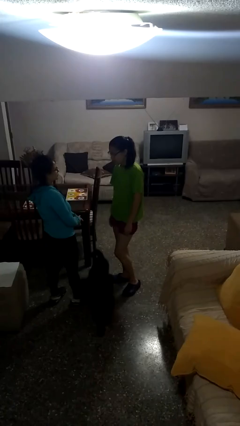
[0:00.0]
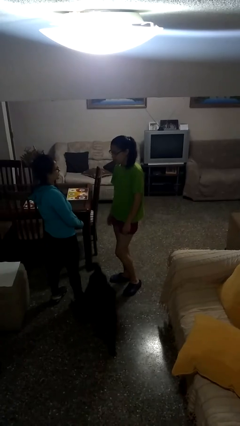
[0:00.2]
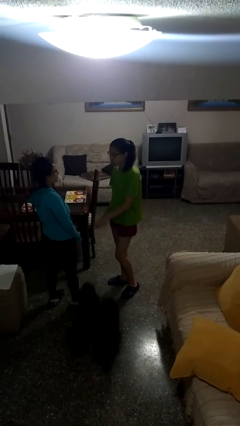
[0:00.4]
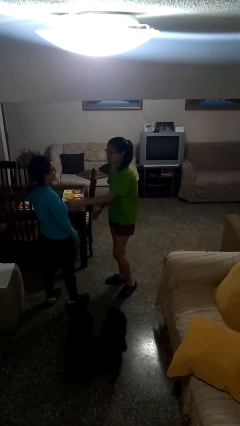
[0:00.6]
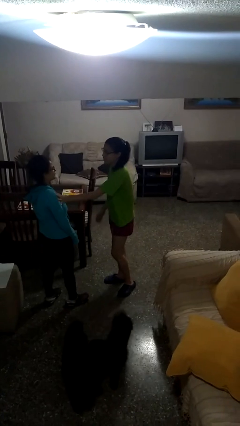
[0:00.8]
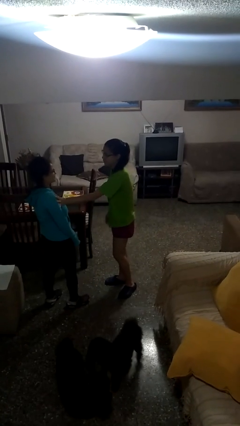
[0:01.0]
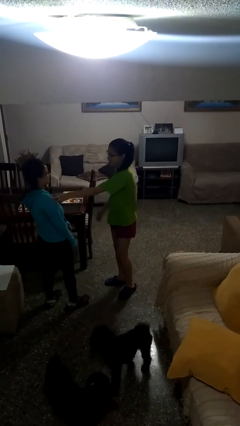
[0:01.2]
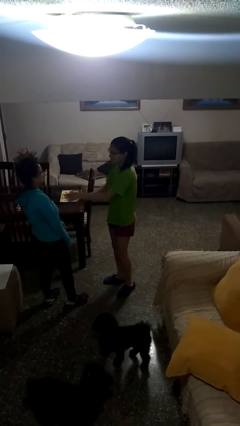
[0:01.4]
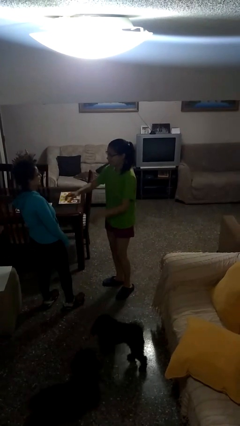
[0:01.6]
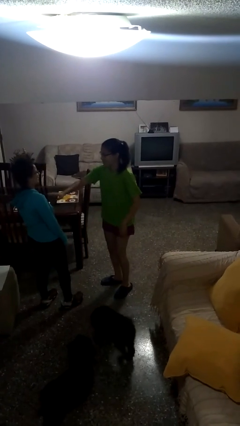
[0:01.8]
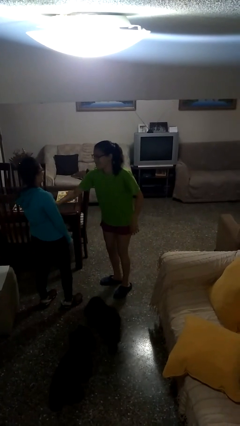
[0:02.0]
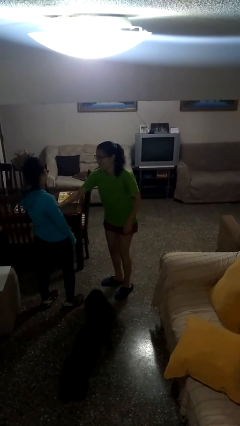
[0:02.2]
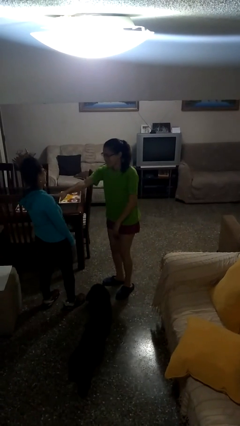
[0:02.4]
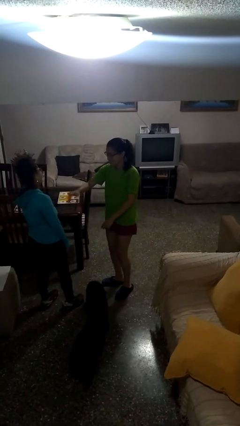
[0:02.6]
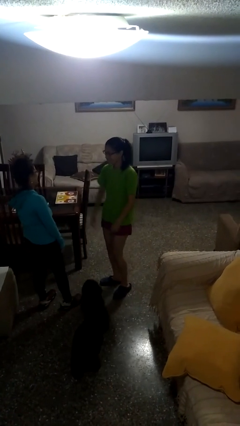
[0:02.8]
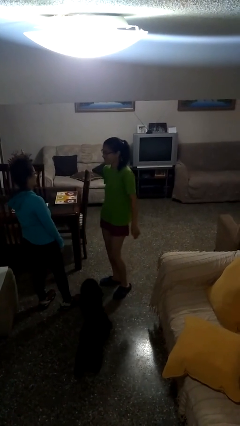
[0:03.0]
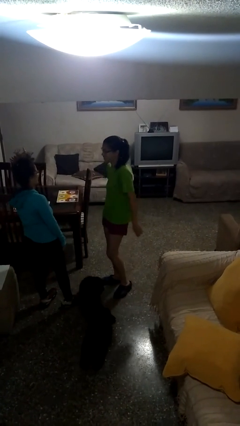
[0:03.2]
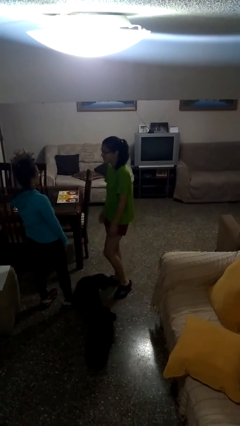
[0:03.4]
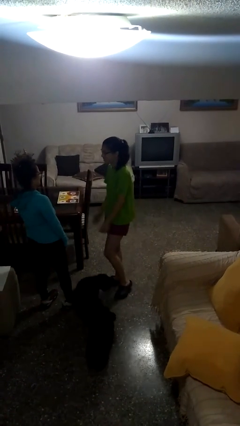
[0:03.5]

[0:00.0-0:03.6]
person shoves person

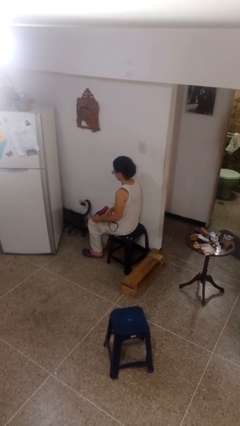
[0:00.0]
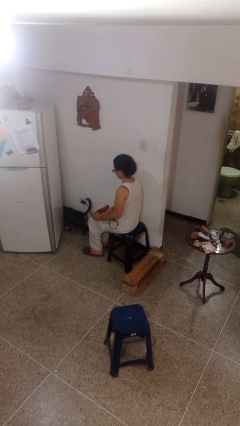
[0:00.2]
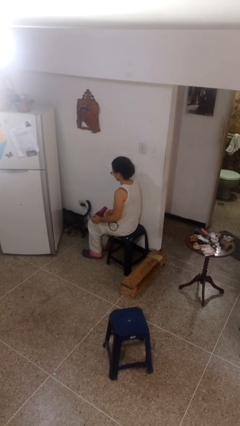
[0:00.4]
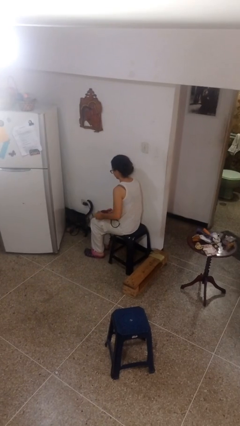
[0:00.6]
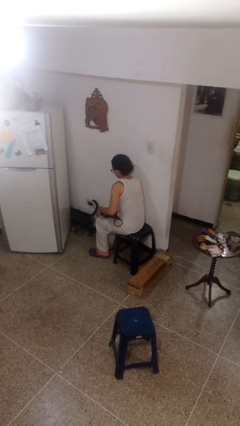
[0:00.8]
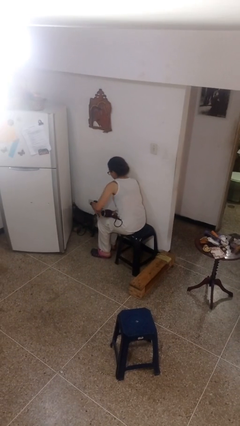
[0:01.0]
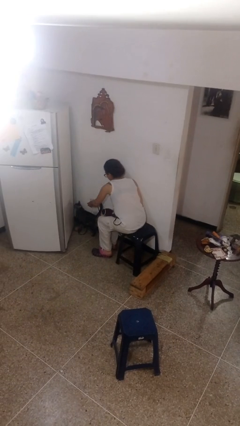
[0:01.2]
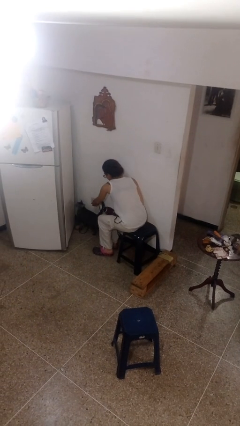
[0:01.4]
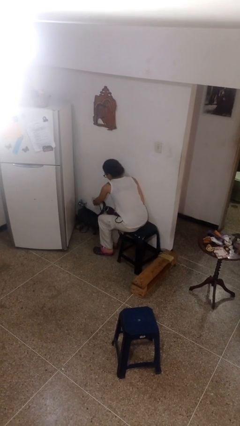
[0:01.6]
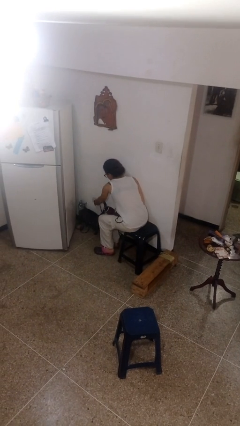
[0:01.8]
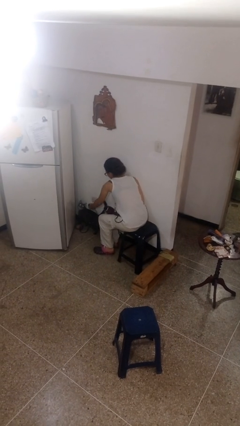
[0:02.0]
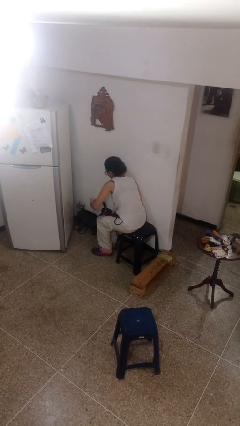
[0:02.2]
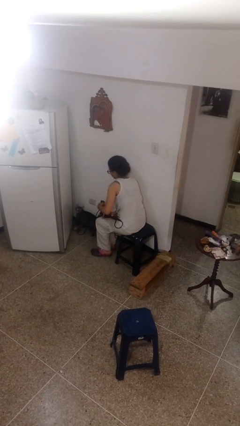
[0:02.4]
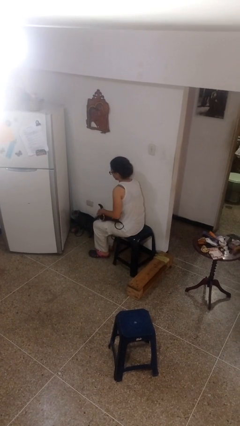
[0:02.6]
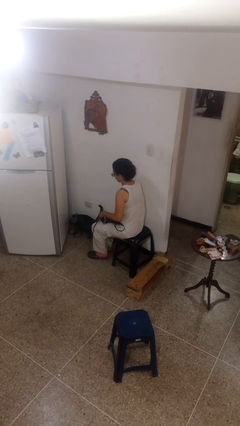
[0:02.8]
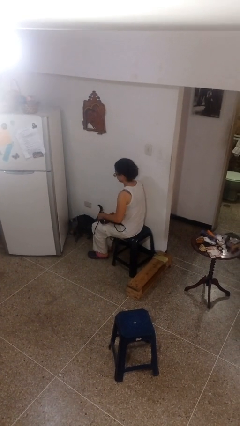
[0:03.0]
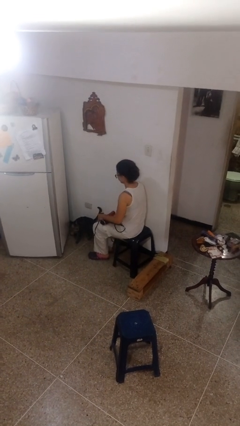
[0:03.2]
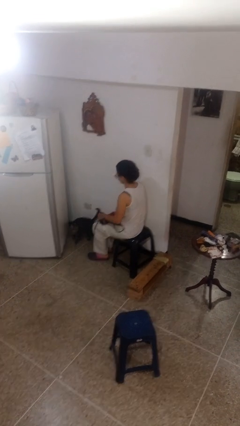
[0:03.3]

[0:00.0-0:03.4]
person unplugs from electrical socket

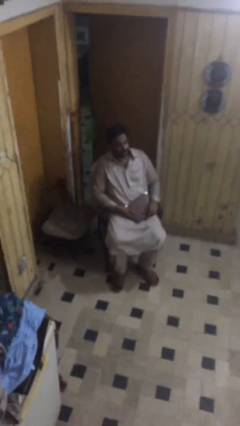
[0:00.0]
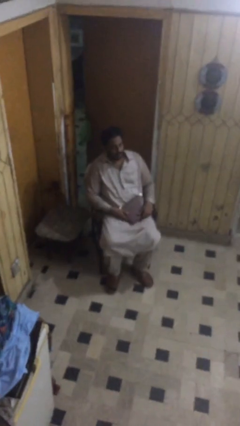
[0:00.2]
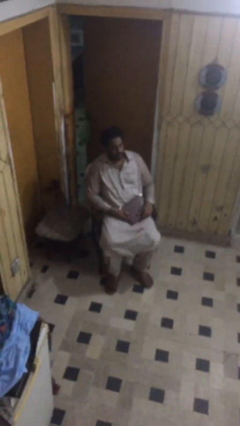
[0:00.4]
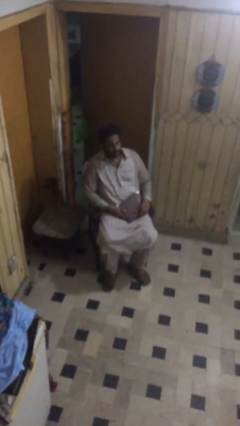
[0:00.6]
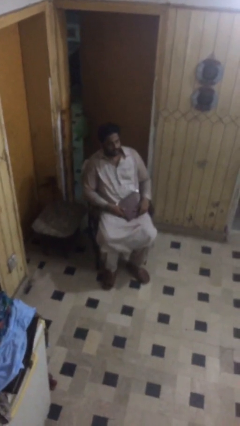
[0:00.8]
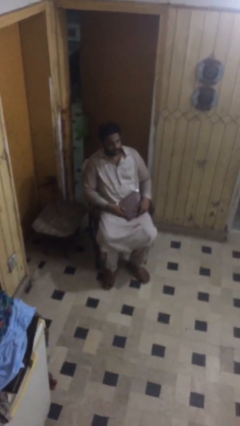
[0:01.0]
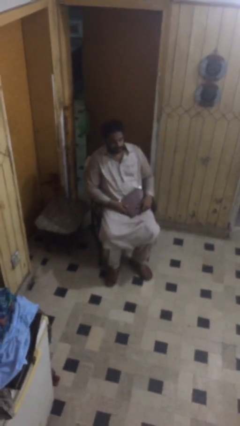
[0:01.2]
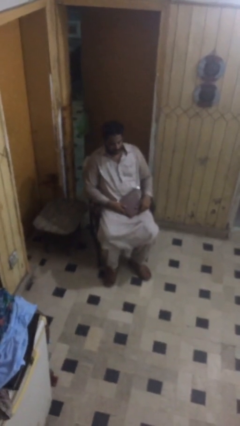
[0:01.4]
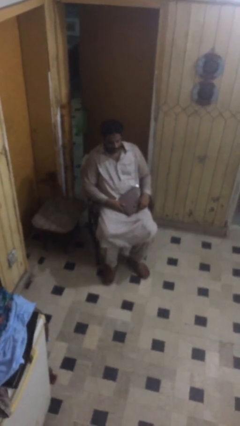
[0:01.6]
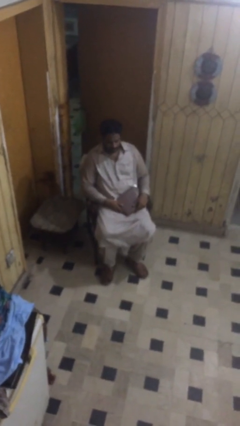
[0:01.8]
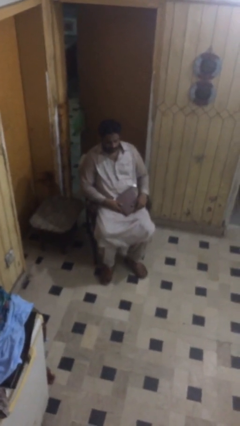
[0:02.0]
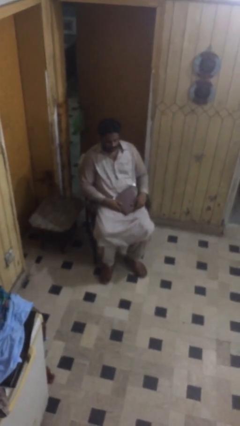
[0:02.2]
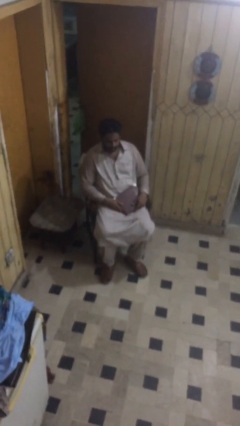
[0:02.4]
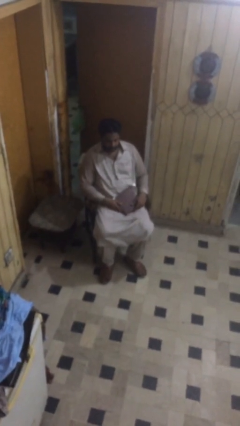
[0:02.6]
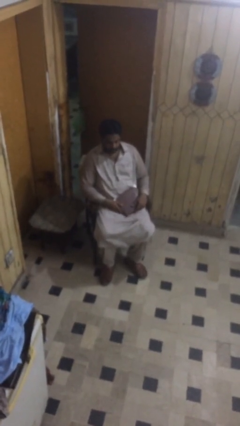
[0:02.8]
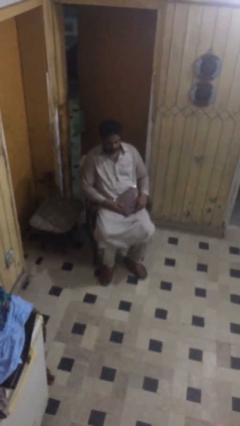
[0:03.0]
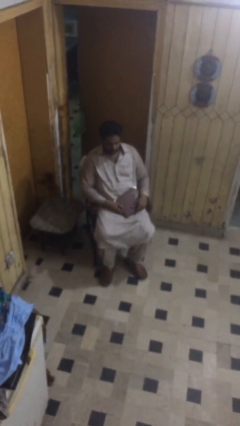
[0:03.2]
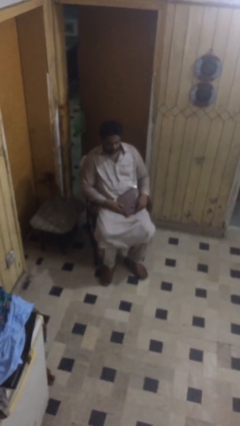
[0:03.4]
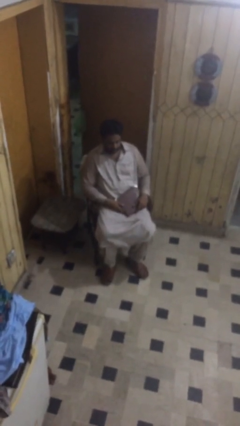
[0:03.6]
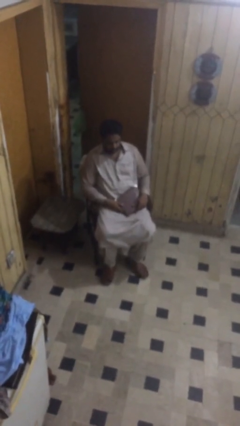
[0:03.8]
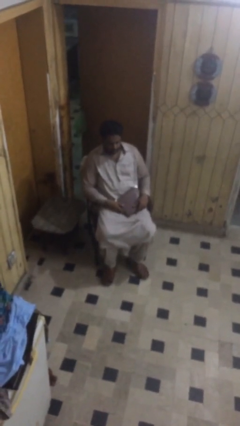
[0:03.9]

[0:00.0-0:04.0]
person sits down

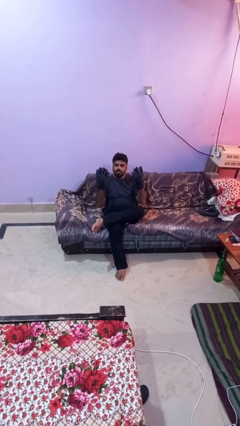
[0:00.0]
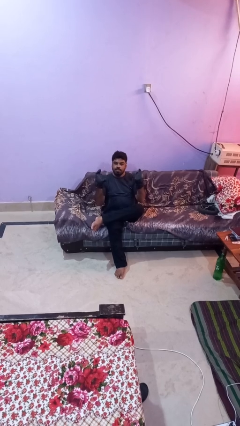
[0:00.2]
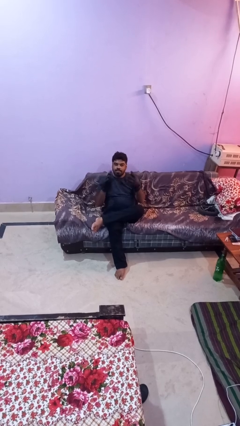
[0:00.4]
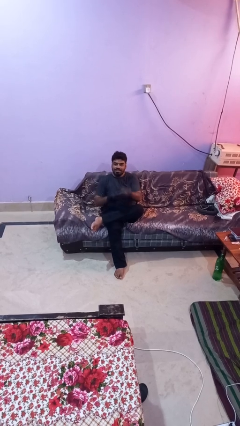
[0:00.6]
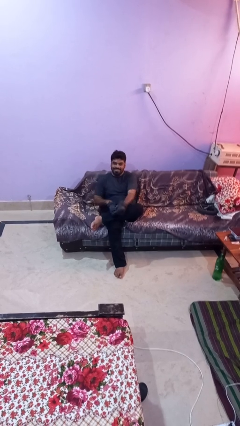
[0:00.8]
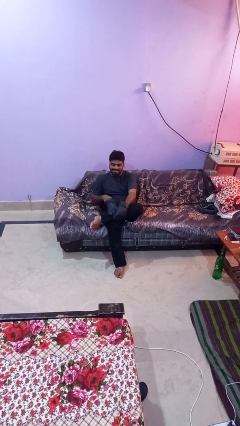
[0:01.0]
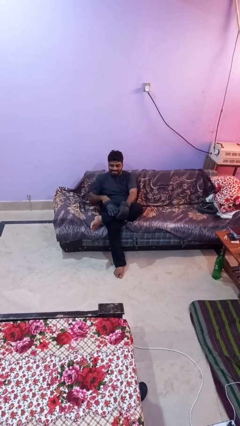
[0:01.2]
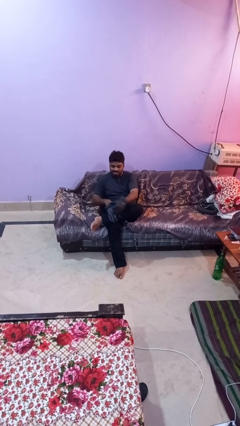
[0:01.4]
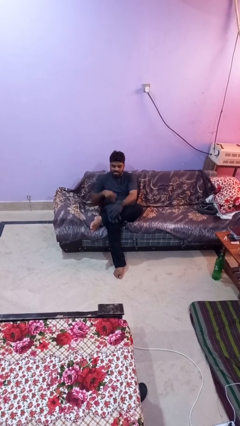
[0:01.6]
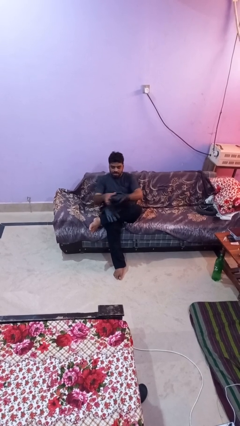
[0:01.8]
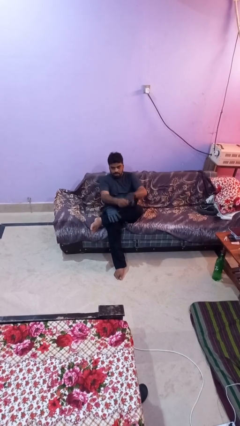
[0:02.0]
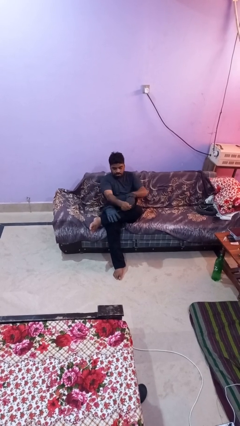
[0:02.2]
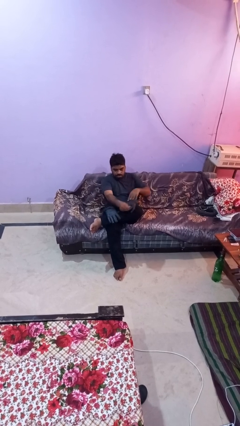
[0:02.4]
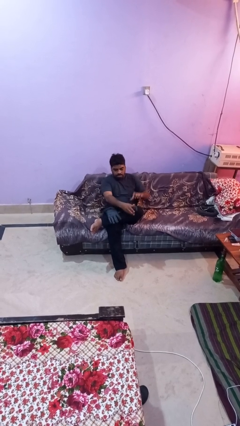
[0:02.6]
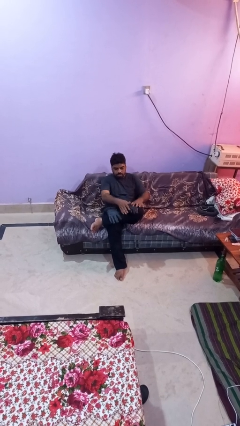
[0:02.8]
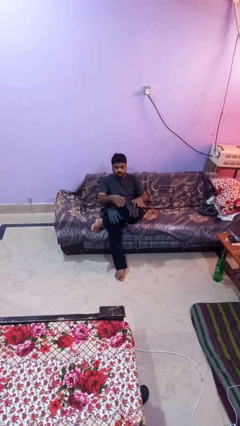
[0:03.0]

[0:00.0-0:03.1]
person takes off gloves

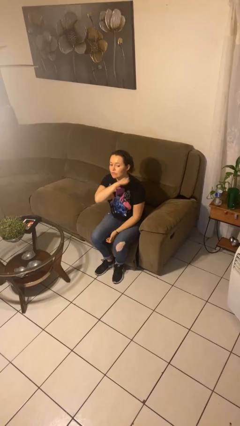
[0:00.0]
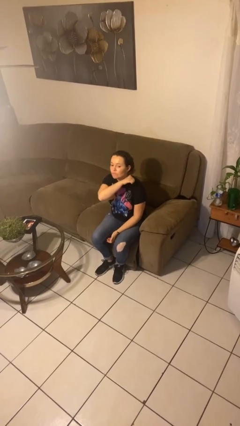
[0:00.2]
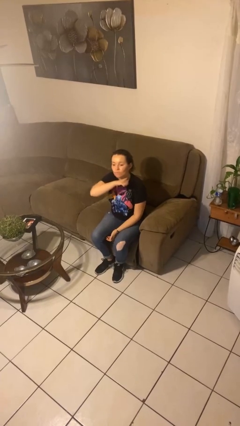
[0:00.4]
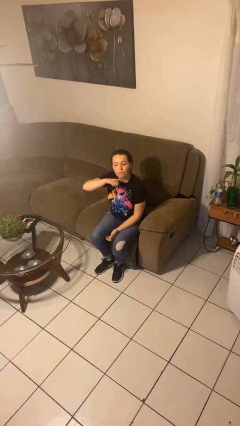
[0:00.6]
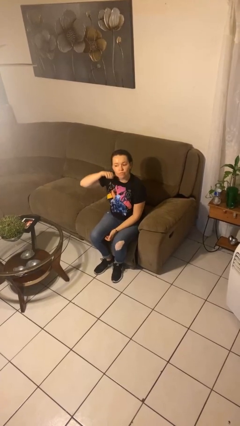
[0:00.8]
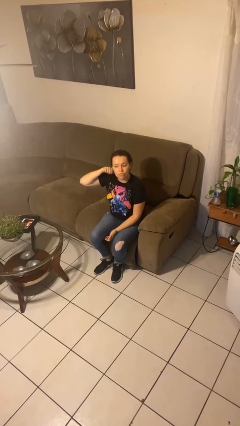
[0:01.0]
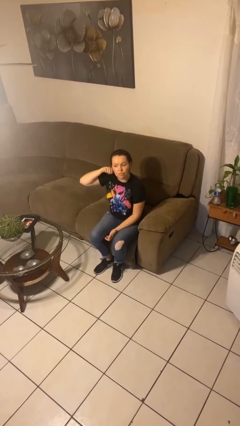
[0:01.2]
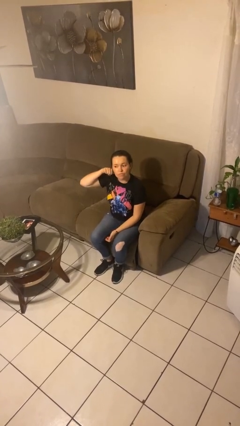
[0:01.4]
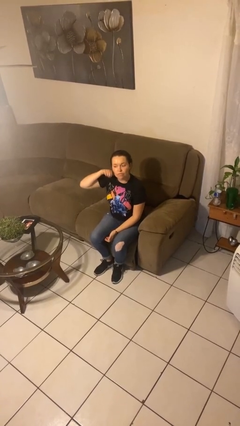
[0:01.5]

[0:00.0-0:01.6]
person gestures cut

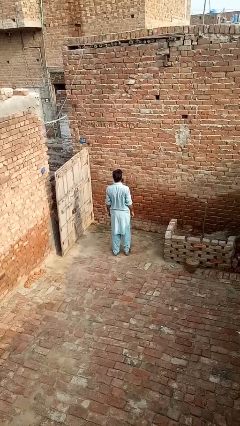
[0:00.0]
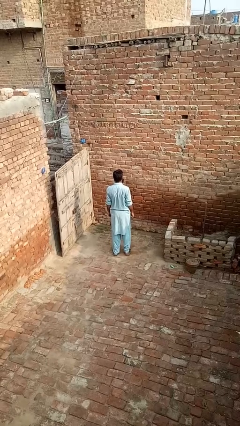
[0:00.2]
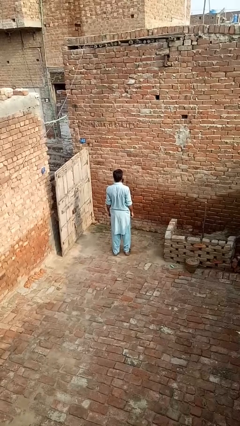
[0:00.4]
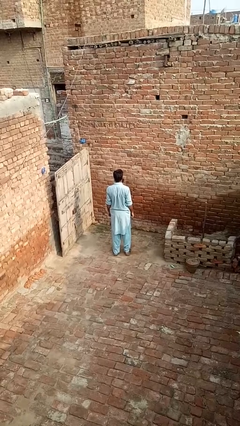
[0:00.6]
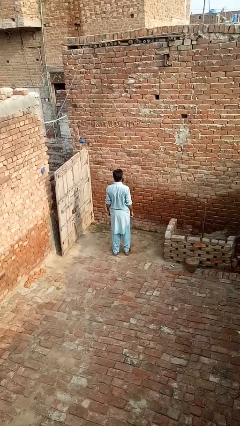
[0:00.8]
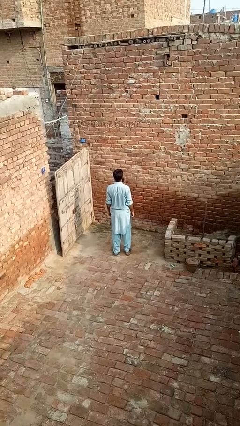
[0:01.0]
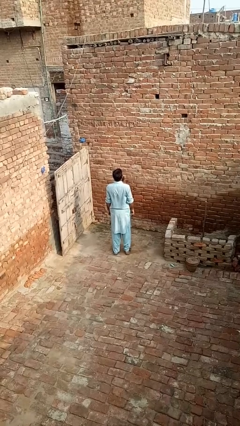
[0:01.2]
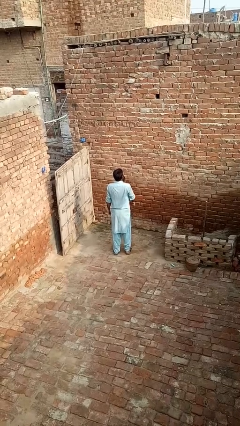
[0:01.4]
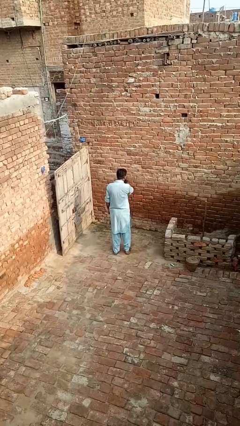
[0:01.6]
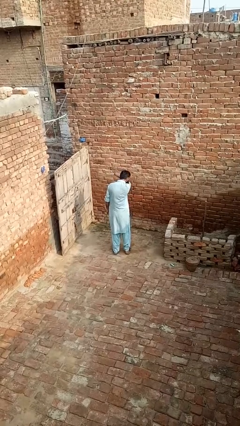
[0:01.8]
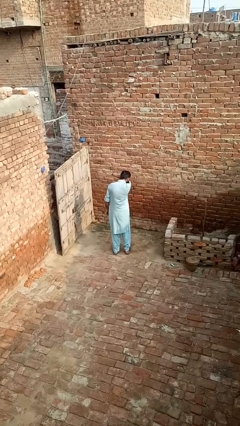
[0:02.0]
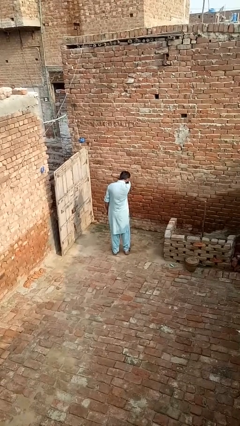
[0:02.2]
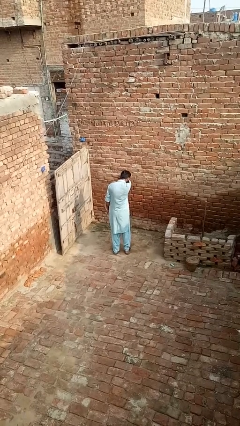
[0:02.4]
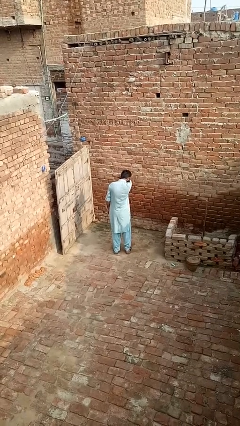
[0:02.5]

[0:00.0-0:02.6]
person sneezes into arm
